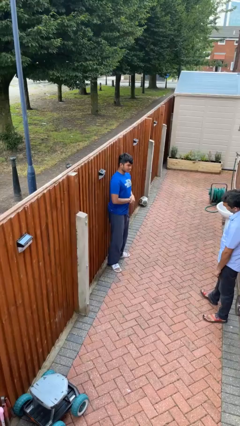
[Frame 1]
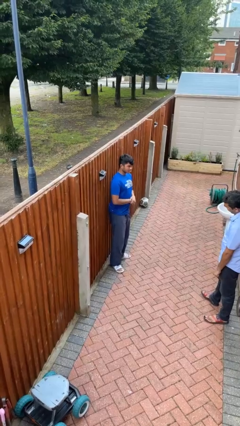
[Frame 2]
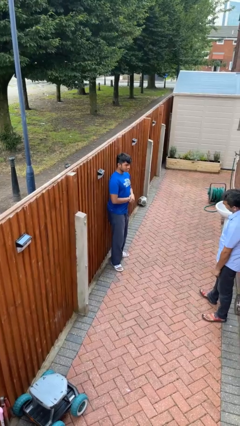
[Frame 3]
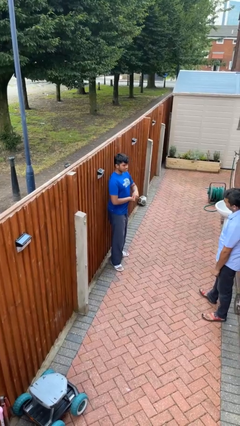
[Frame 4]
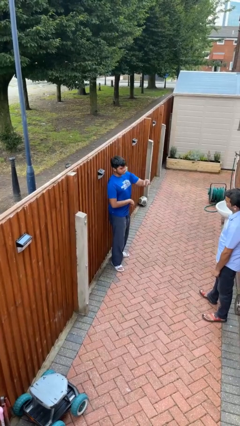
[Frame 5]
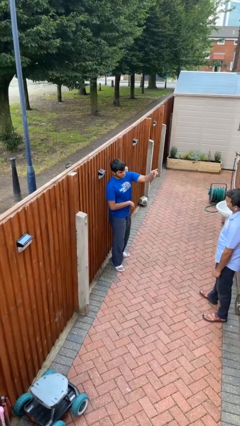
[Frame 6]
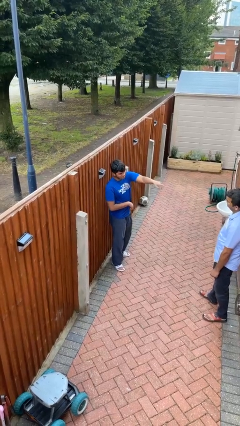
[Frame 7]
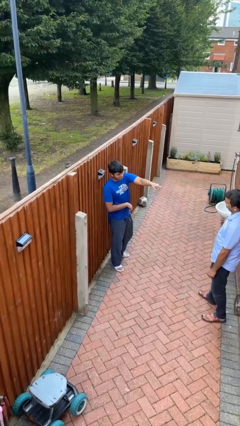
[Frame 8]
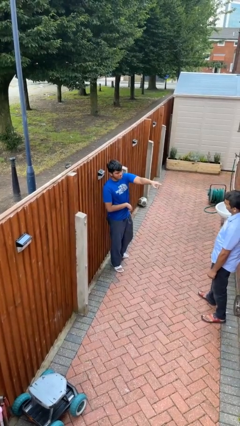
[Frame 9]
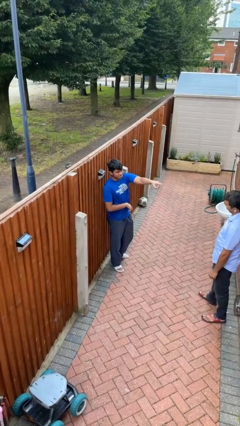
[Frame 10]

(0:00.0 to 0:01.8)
person points at person

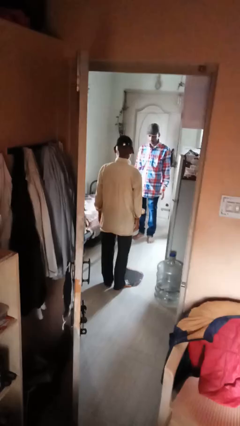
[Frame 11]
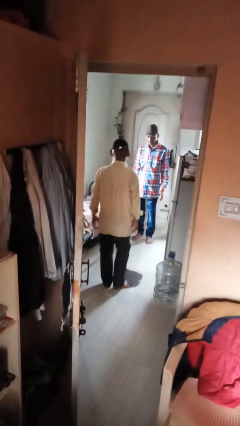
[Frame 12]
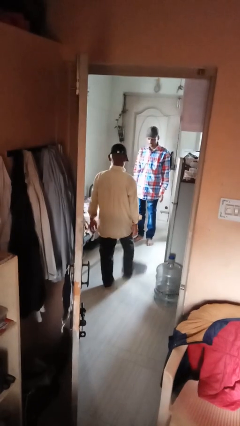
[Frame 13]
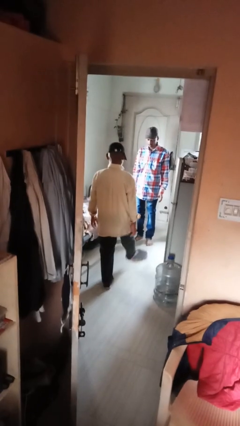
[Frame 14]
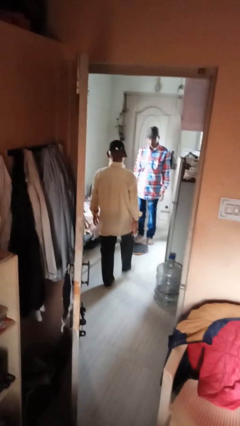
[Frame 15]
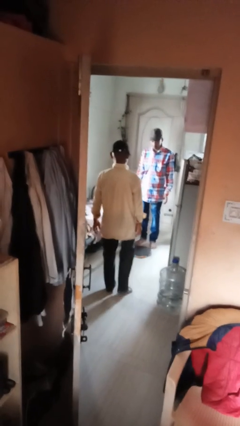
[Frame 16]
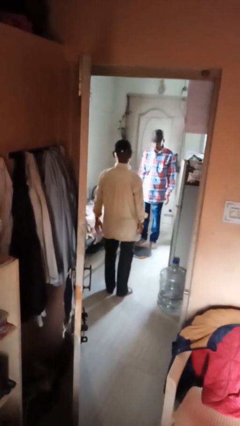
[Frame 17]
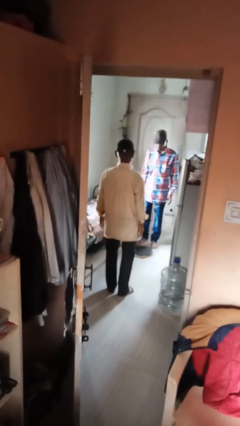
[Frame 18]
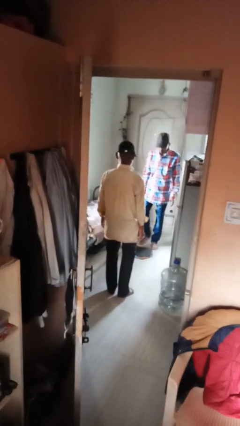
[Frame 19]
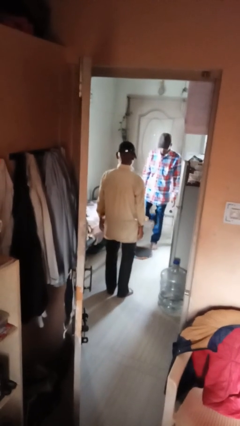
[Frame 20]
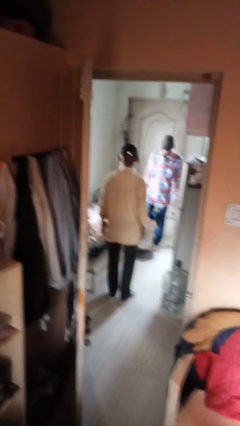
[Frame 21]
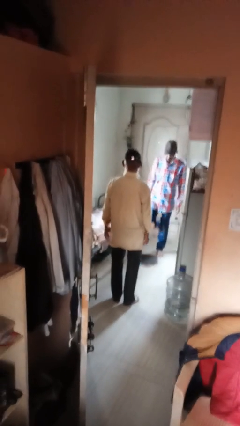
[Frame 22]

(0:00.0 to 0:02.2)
person kicks object to person

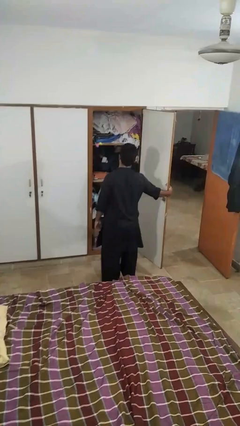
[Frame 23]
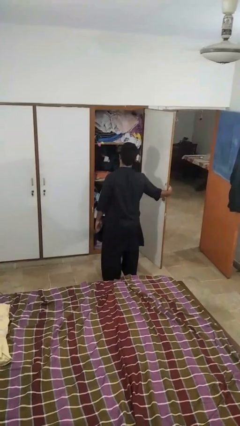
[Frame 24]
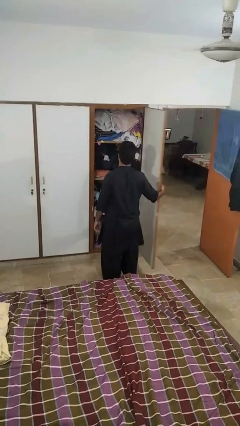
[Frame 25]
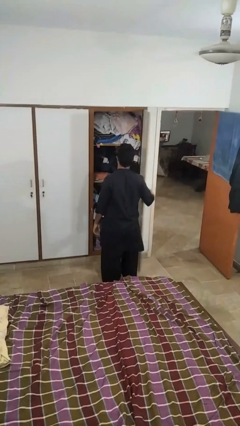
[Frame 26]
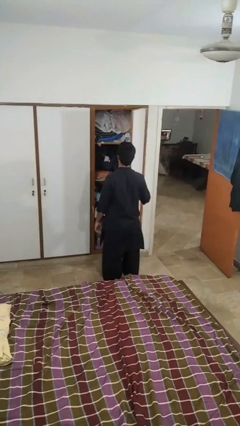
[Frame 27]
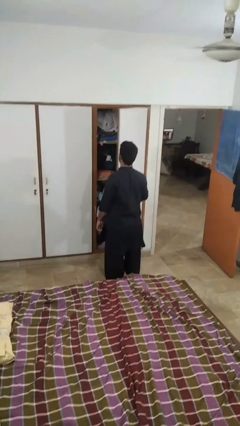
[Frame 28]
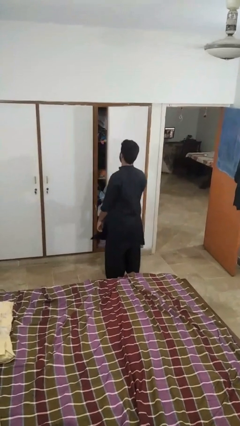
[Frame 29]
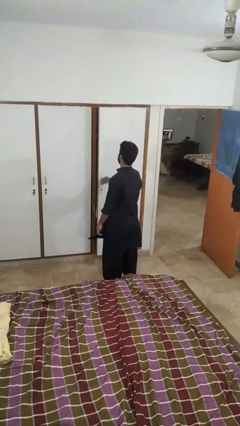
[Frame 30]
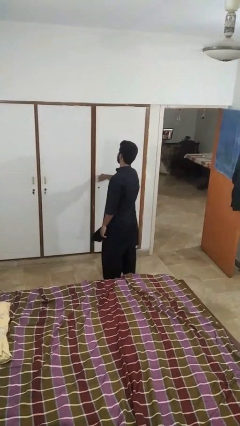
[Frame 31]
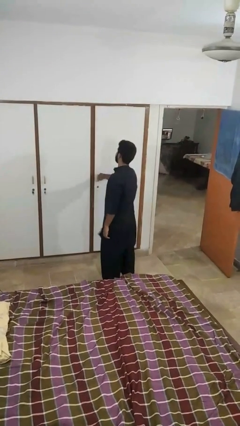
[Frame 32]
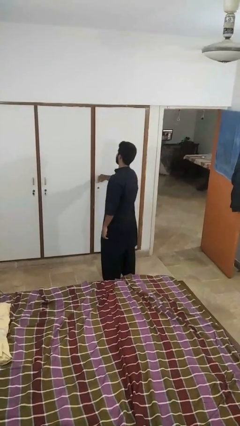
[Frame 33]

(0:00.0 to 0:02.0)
person closes closet door

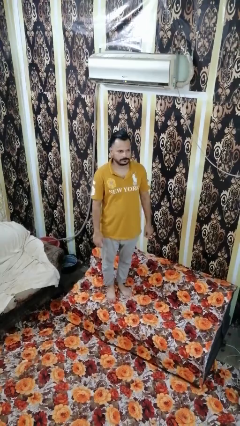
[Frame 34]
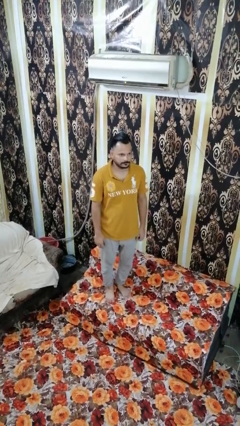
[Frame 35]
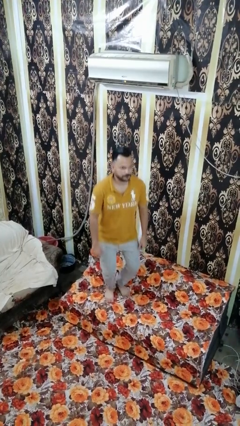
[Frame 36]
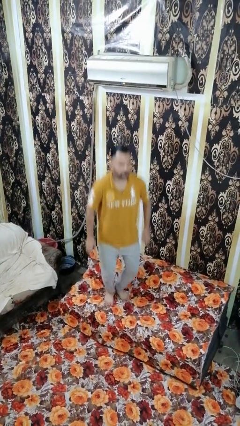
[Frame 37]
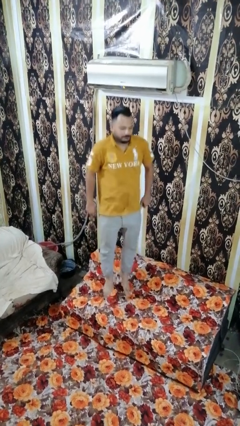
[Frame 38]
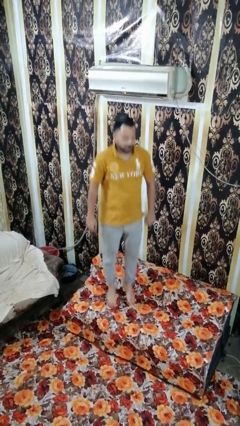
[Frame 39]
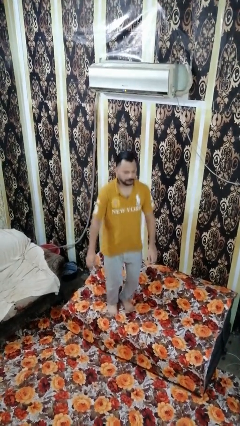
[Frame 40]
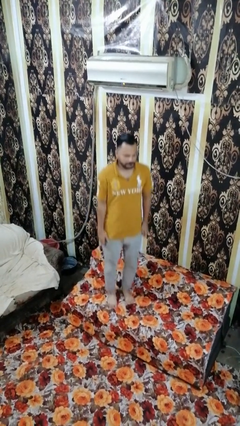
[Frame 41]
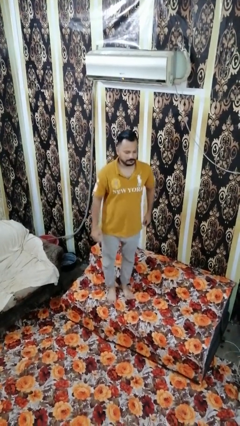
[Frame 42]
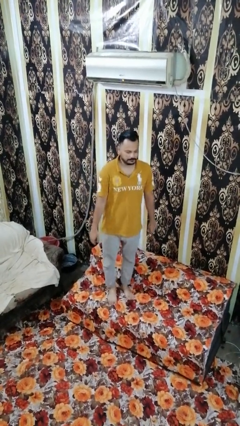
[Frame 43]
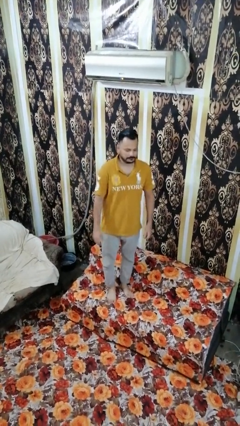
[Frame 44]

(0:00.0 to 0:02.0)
person jumps on couch

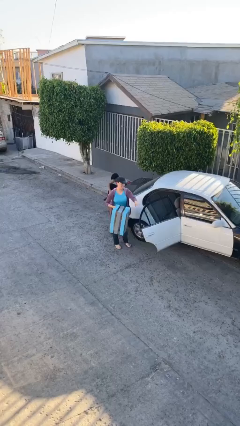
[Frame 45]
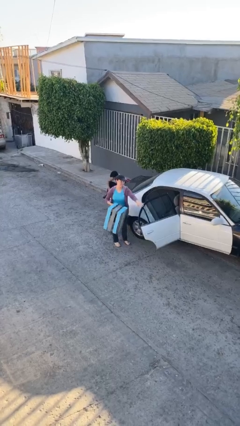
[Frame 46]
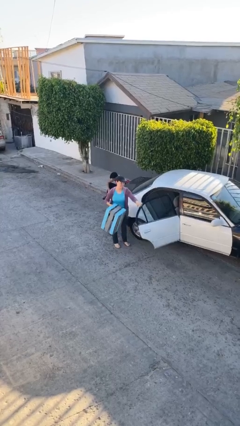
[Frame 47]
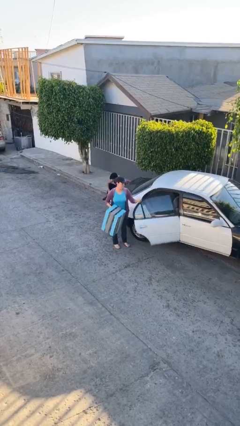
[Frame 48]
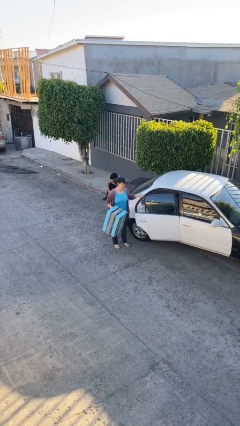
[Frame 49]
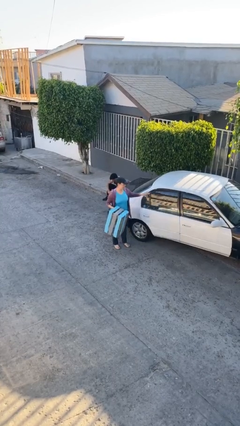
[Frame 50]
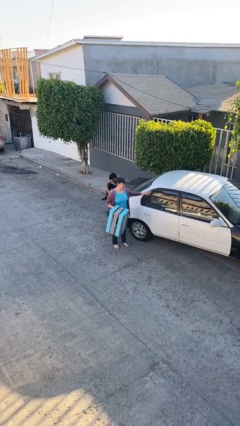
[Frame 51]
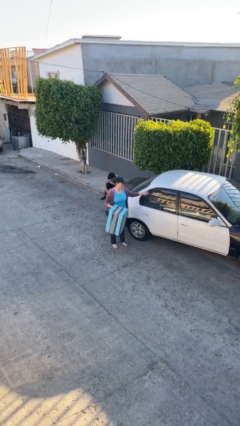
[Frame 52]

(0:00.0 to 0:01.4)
person closes car door

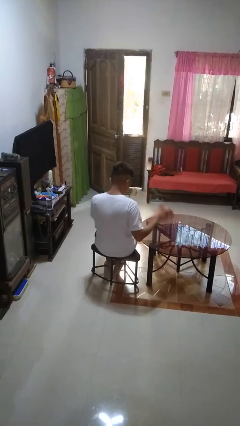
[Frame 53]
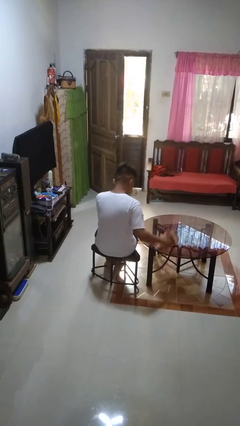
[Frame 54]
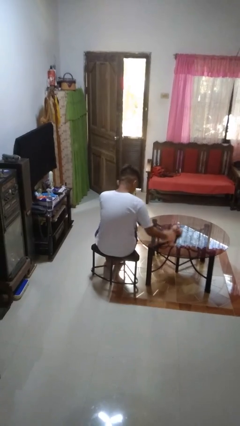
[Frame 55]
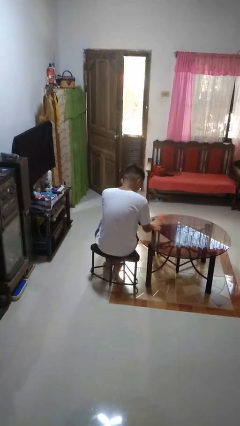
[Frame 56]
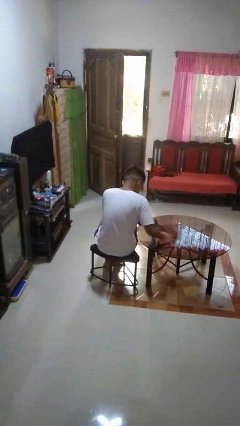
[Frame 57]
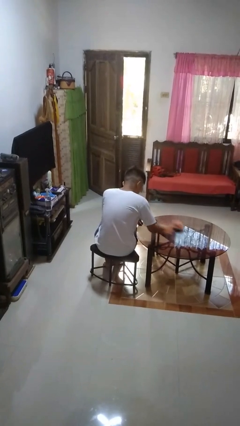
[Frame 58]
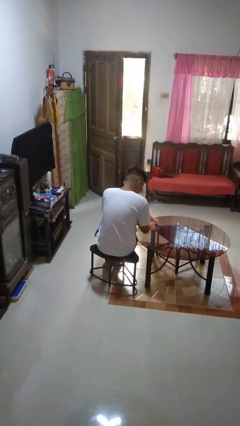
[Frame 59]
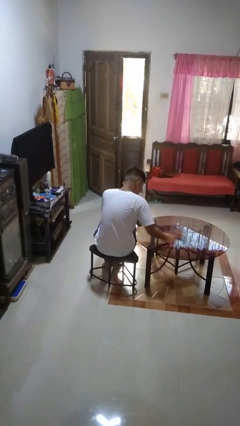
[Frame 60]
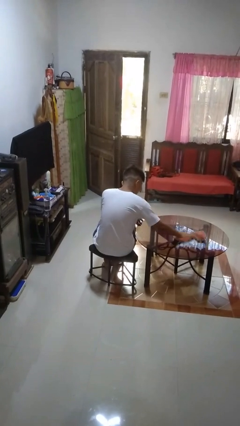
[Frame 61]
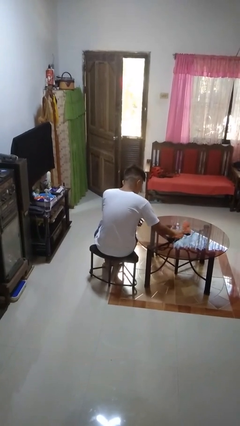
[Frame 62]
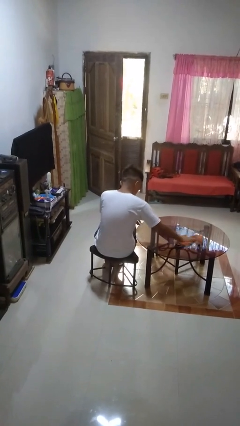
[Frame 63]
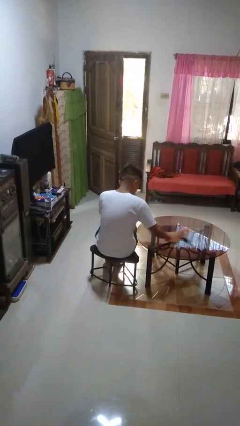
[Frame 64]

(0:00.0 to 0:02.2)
person cleans table with rag

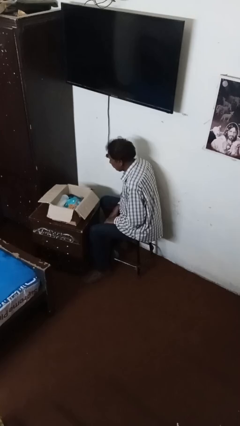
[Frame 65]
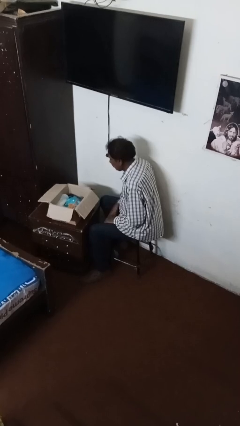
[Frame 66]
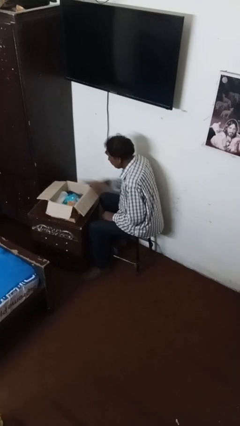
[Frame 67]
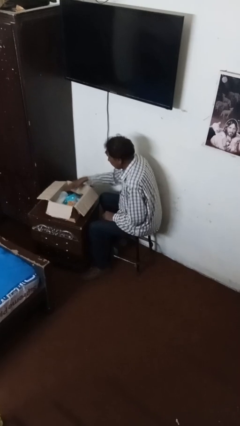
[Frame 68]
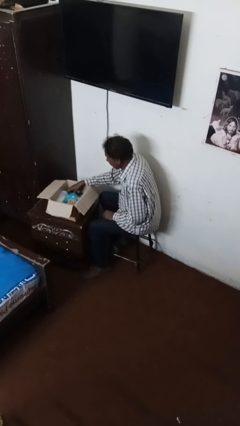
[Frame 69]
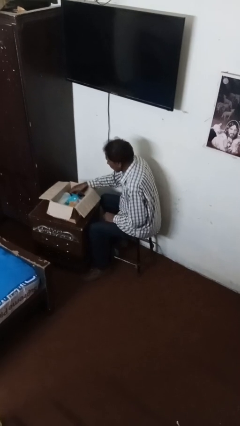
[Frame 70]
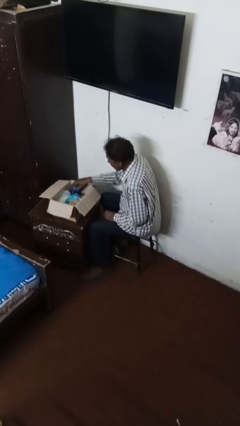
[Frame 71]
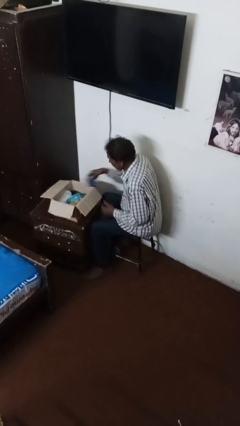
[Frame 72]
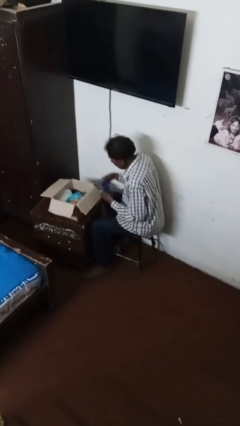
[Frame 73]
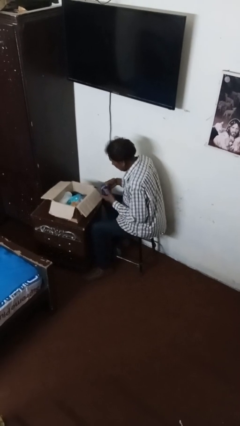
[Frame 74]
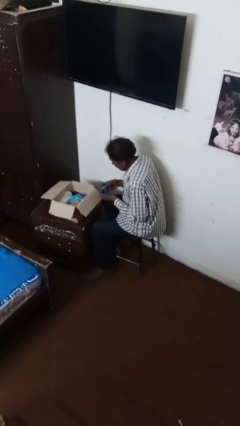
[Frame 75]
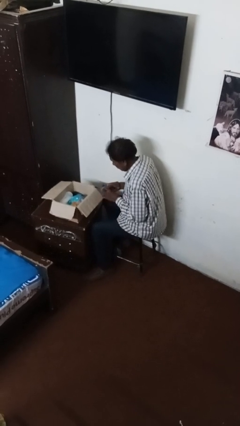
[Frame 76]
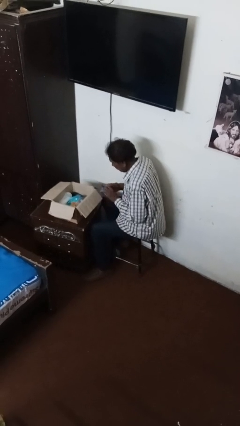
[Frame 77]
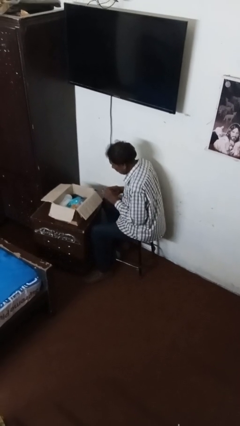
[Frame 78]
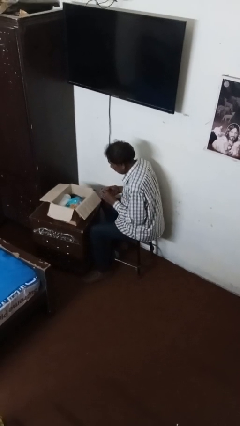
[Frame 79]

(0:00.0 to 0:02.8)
person searches in box

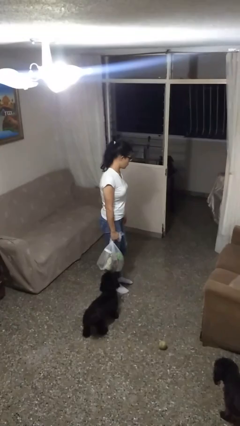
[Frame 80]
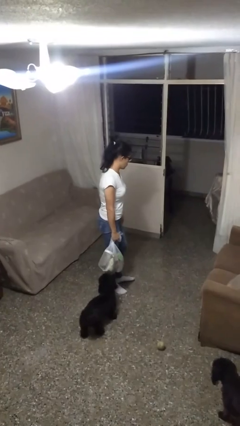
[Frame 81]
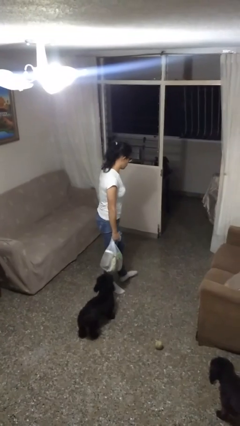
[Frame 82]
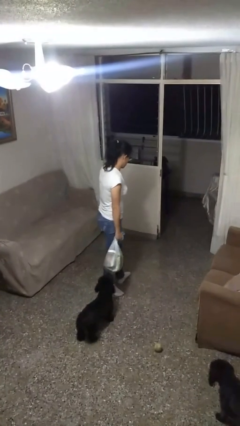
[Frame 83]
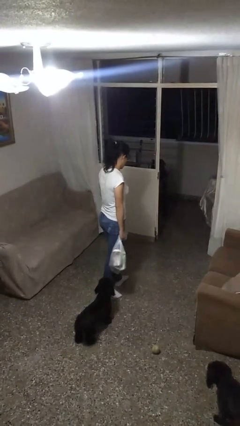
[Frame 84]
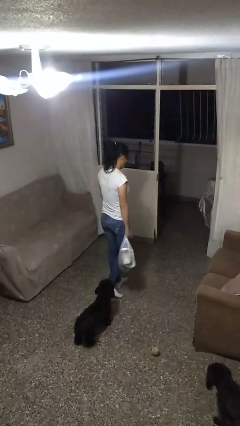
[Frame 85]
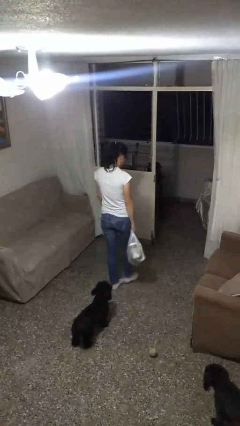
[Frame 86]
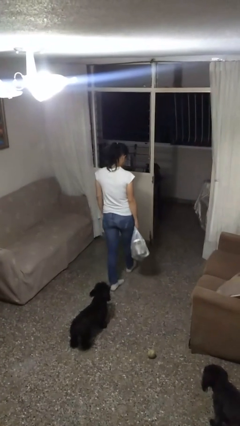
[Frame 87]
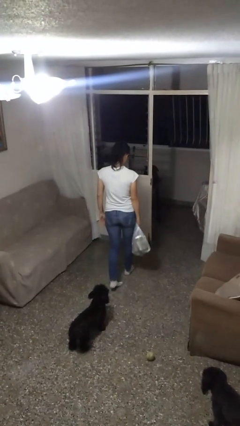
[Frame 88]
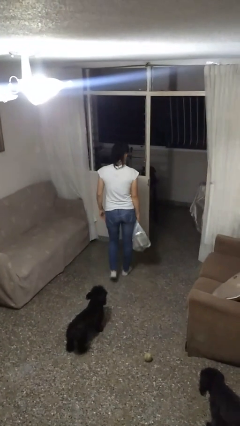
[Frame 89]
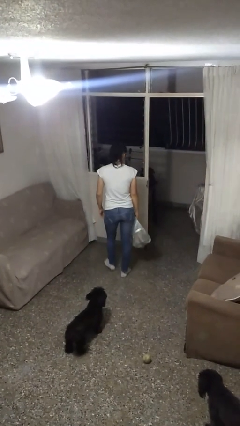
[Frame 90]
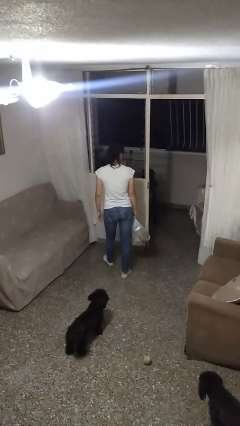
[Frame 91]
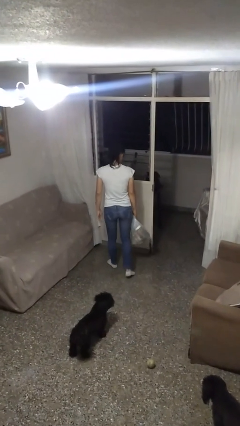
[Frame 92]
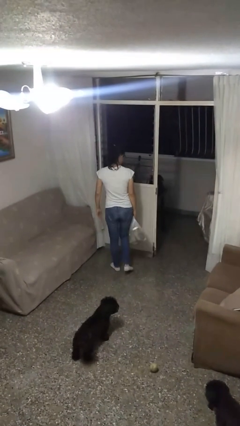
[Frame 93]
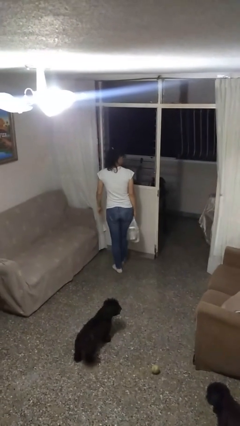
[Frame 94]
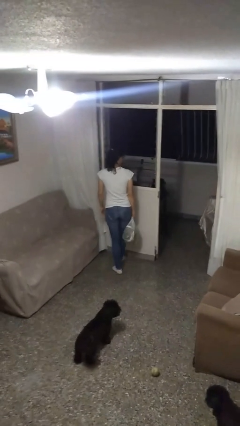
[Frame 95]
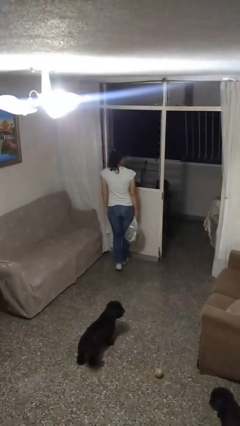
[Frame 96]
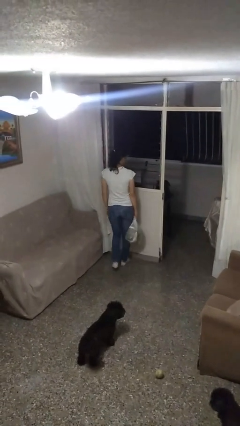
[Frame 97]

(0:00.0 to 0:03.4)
person carries groceries
